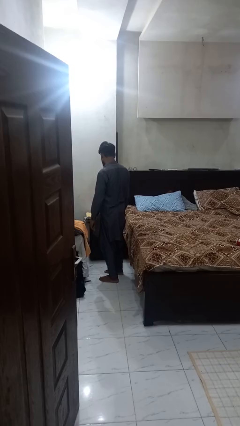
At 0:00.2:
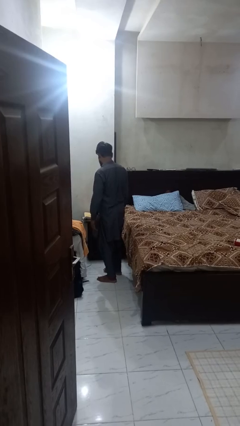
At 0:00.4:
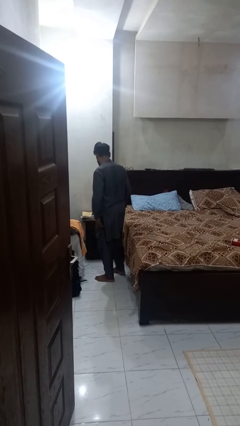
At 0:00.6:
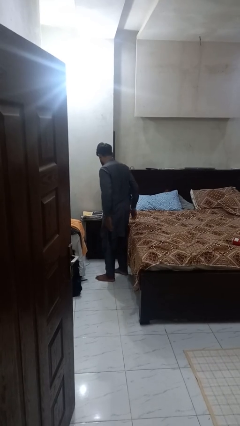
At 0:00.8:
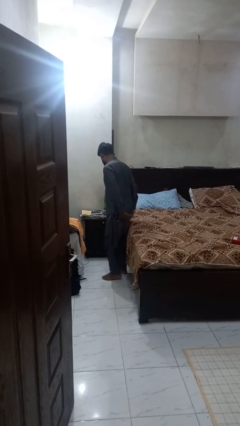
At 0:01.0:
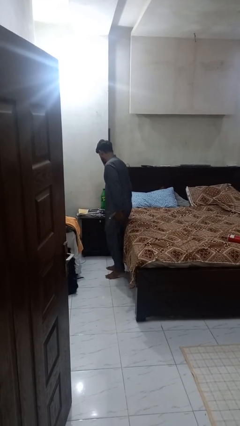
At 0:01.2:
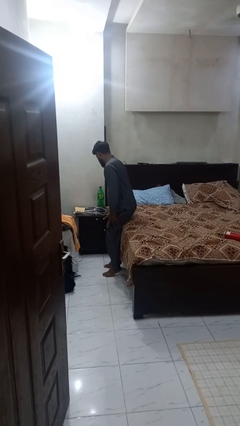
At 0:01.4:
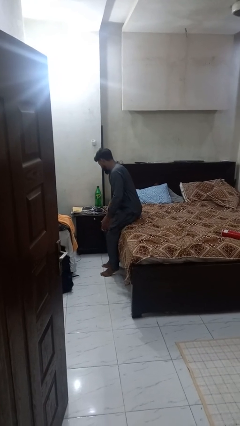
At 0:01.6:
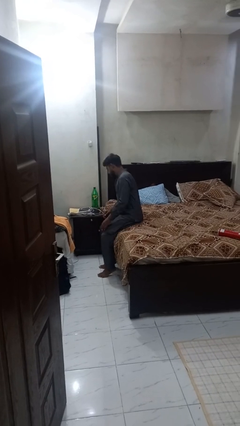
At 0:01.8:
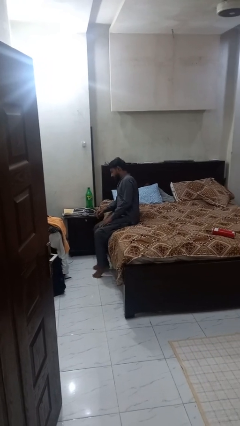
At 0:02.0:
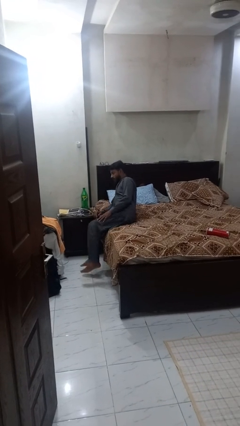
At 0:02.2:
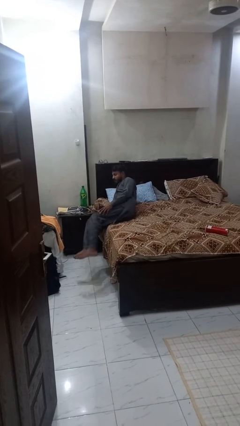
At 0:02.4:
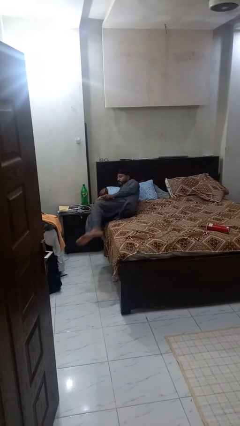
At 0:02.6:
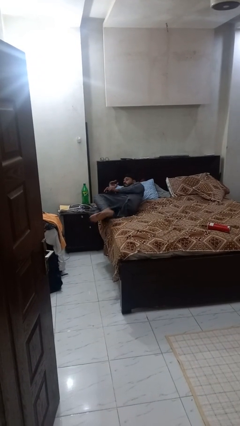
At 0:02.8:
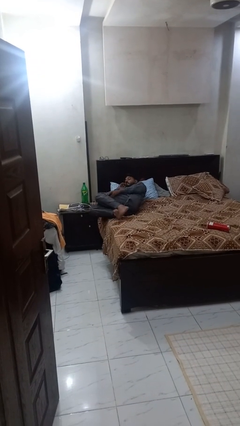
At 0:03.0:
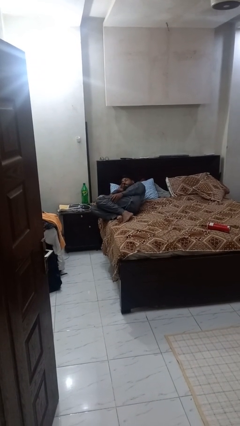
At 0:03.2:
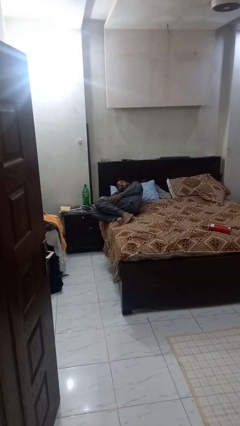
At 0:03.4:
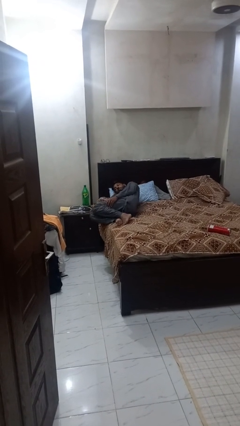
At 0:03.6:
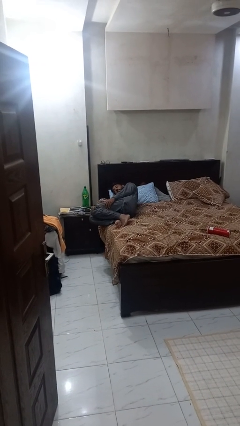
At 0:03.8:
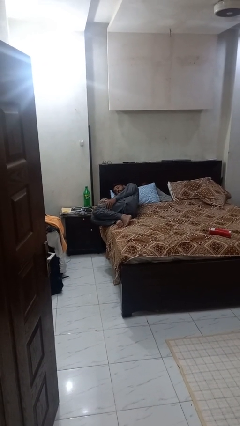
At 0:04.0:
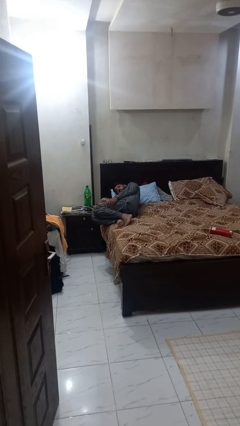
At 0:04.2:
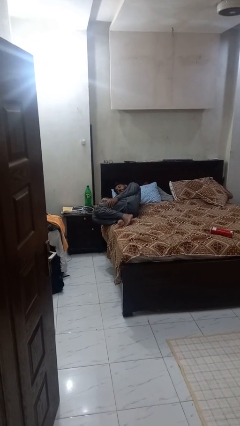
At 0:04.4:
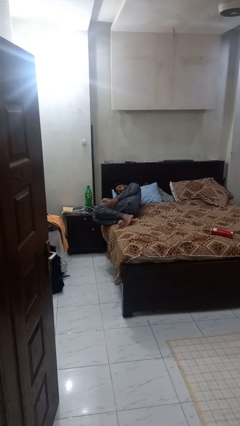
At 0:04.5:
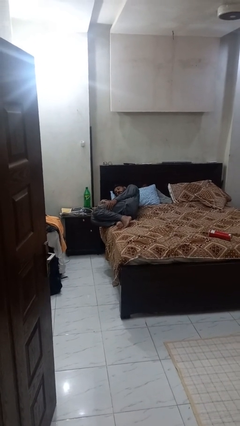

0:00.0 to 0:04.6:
person lies down on bed

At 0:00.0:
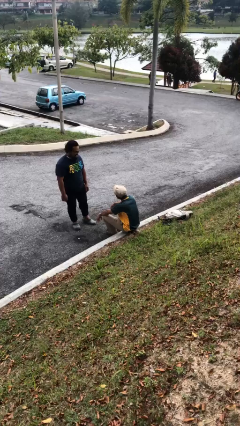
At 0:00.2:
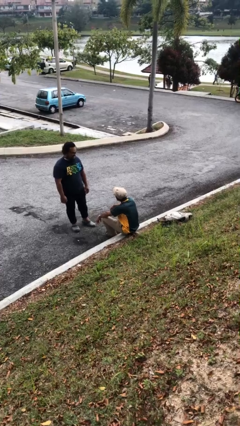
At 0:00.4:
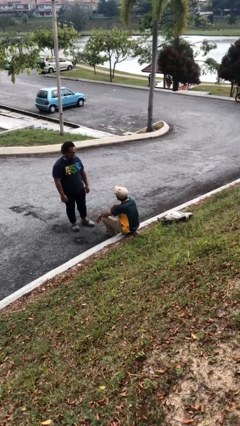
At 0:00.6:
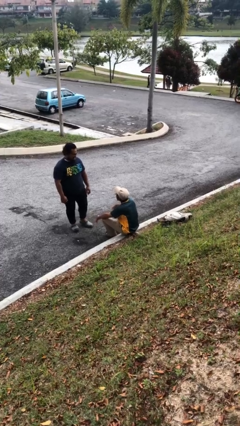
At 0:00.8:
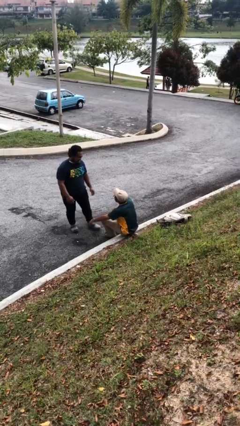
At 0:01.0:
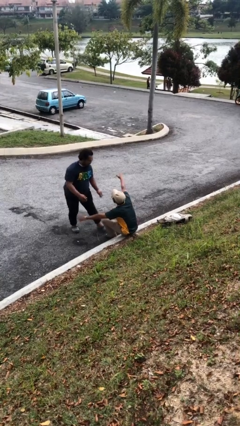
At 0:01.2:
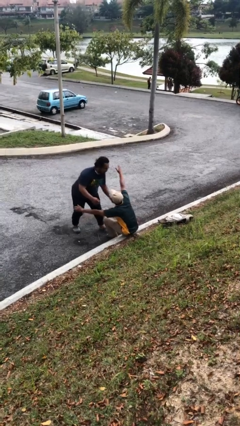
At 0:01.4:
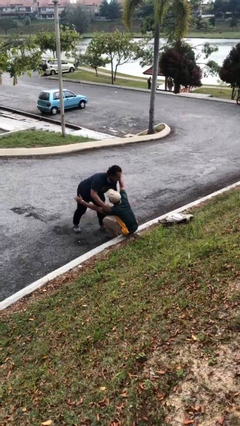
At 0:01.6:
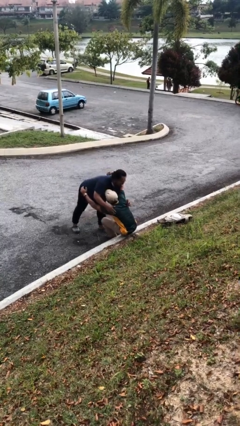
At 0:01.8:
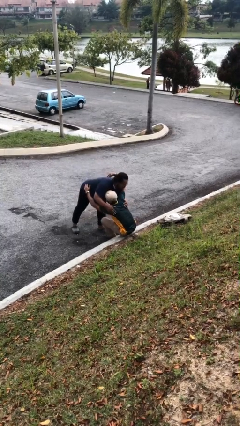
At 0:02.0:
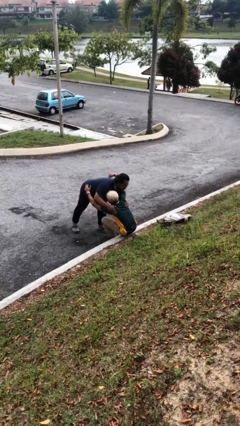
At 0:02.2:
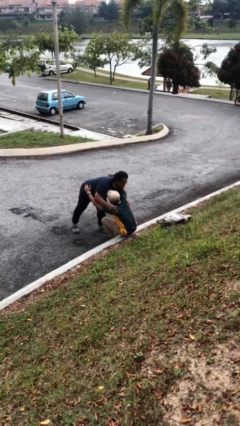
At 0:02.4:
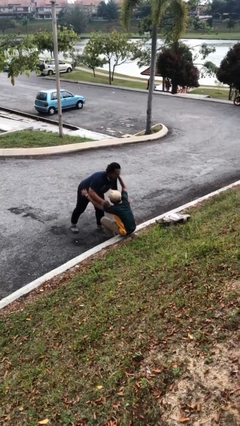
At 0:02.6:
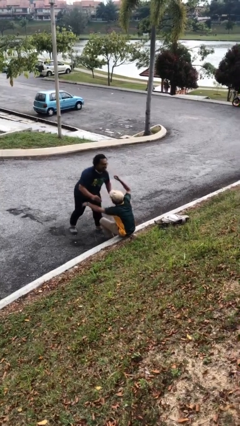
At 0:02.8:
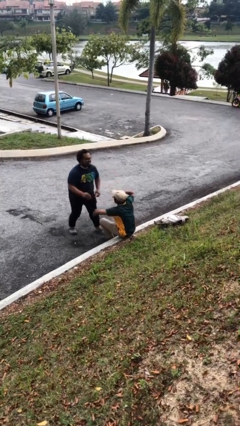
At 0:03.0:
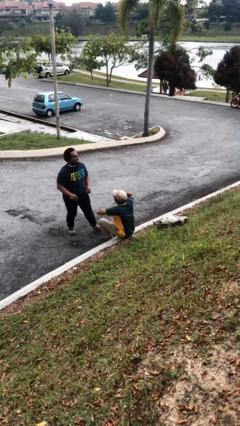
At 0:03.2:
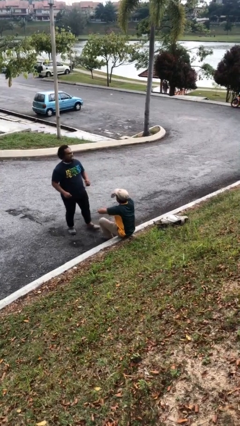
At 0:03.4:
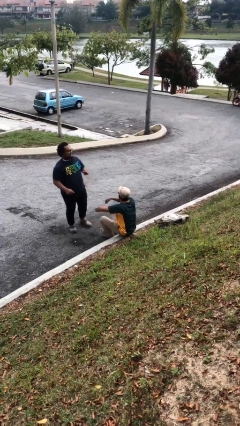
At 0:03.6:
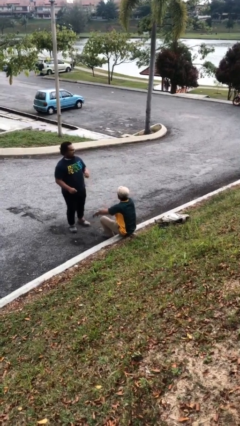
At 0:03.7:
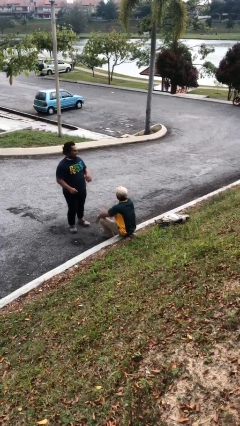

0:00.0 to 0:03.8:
person embraces person

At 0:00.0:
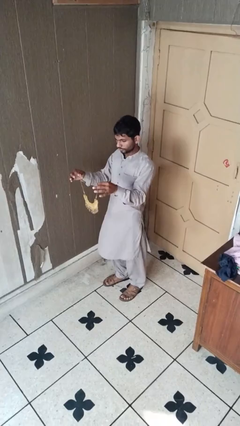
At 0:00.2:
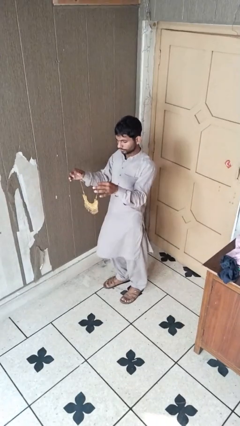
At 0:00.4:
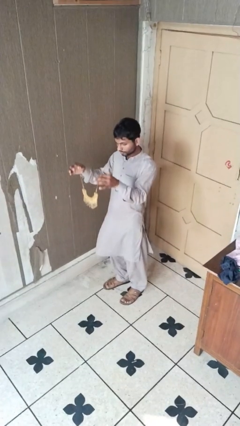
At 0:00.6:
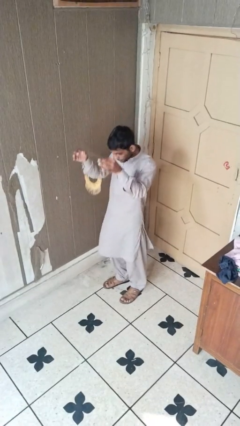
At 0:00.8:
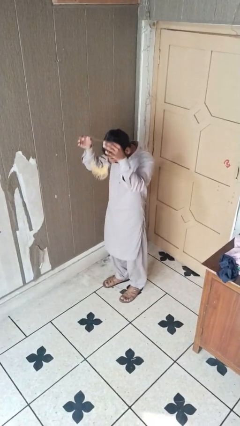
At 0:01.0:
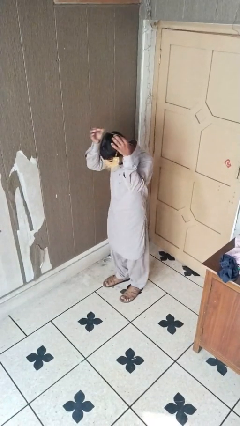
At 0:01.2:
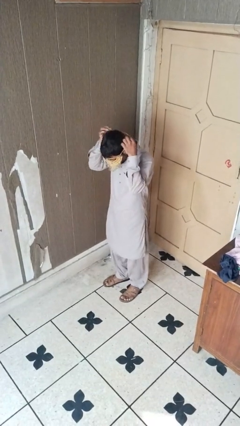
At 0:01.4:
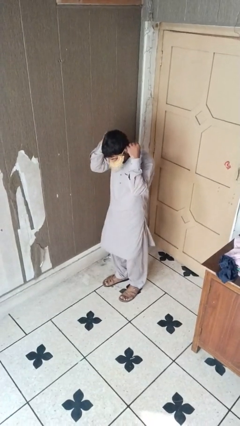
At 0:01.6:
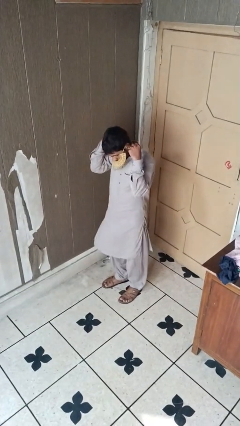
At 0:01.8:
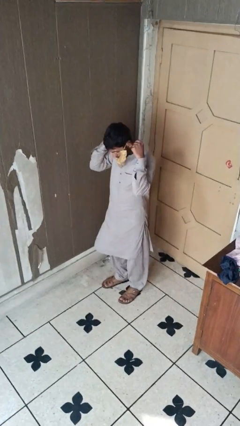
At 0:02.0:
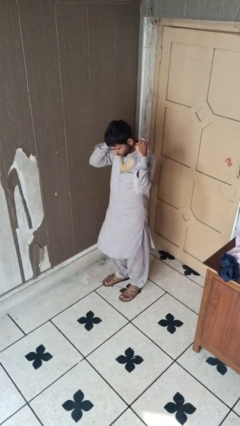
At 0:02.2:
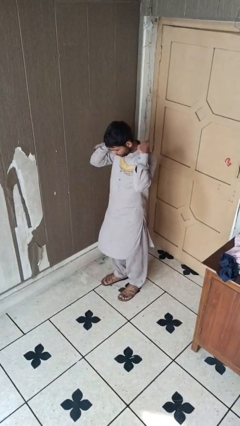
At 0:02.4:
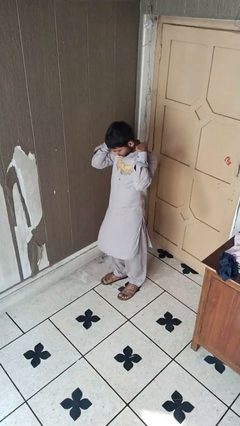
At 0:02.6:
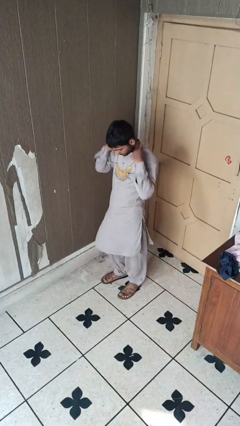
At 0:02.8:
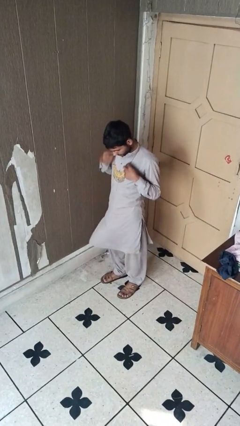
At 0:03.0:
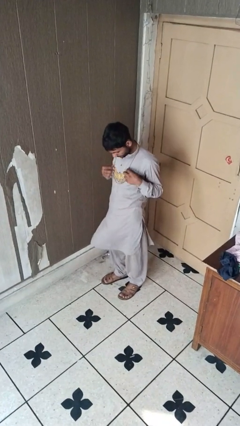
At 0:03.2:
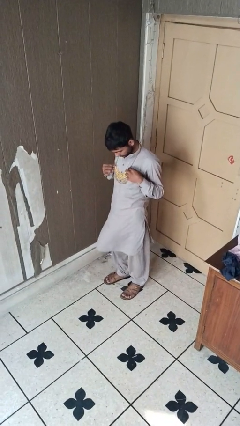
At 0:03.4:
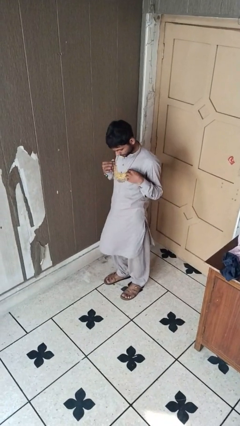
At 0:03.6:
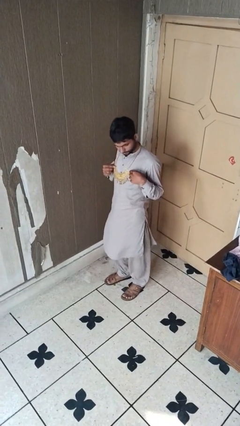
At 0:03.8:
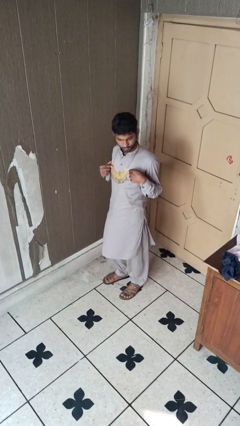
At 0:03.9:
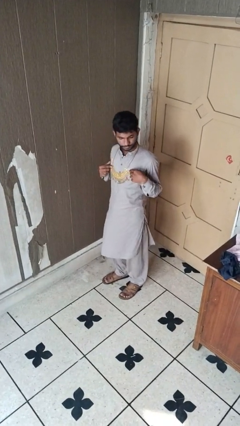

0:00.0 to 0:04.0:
person puts on necklace

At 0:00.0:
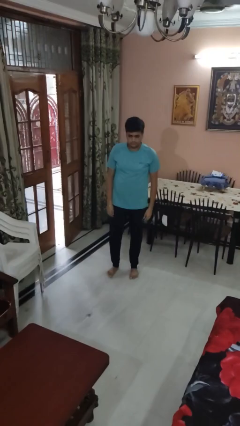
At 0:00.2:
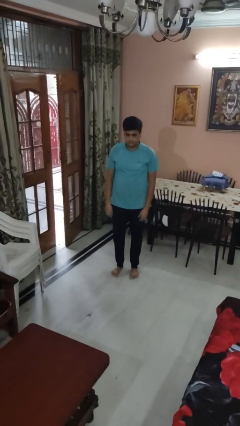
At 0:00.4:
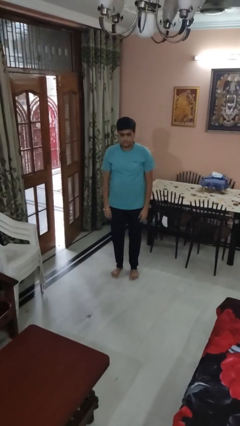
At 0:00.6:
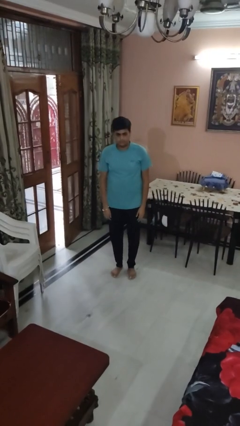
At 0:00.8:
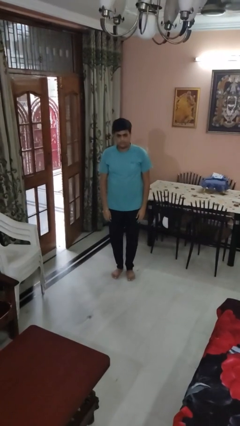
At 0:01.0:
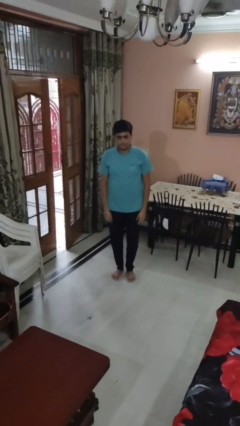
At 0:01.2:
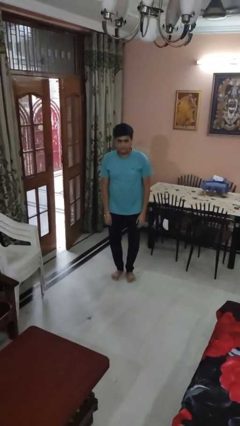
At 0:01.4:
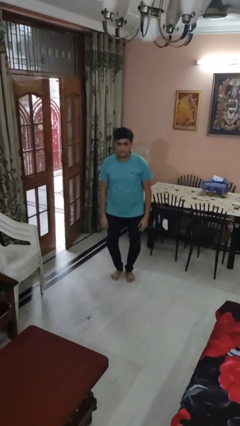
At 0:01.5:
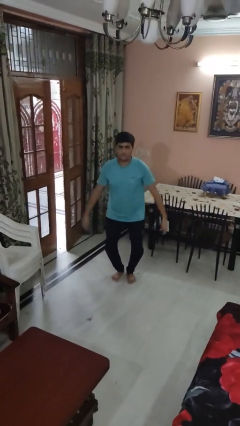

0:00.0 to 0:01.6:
person exercises with jumping jacks

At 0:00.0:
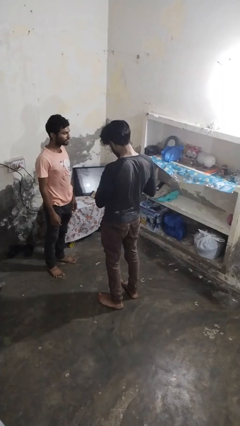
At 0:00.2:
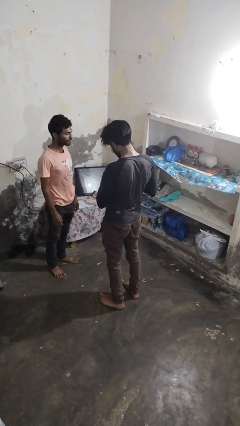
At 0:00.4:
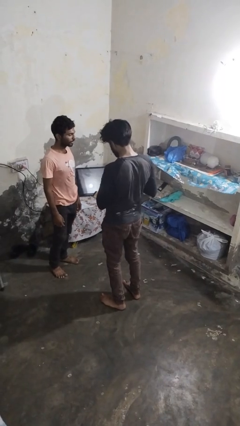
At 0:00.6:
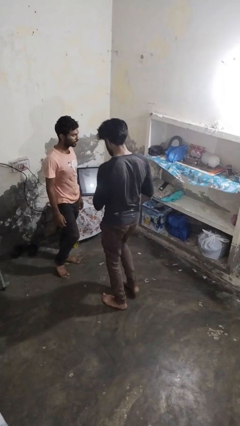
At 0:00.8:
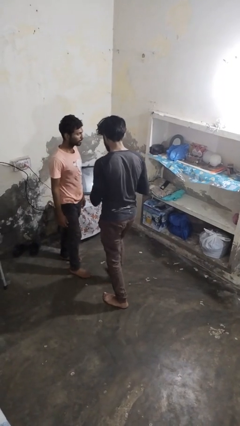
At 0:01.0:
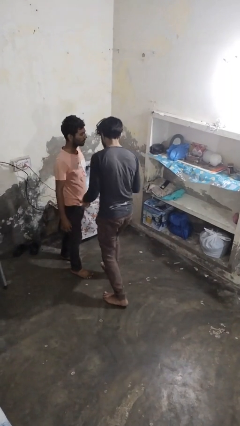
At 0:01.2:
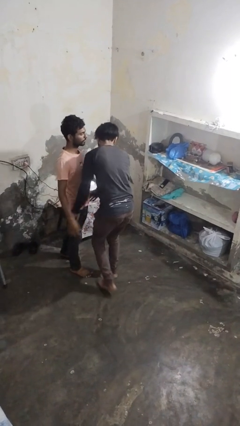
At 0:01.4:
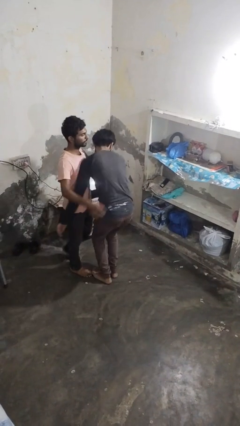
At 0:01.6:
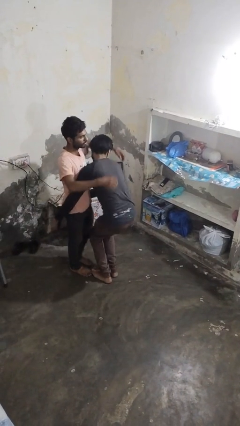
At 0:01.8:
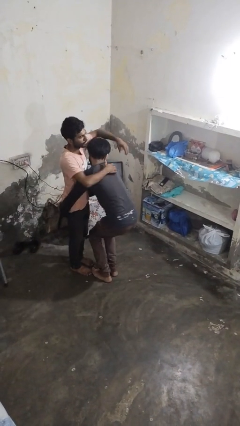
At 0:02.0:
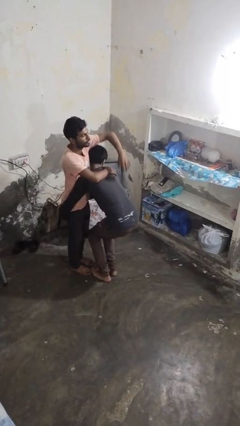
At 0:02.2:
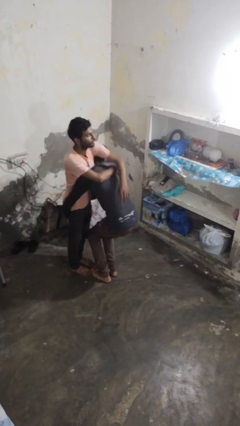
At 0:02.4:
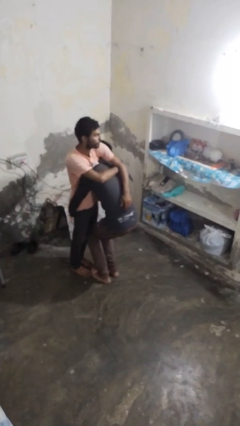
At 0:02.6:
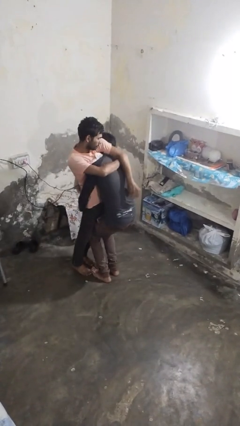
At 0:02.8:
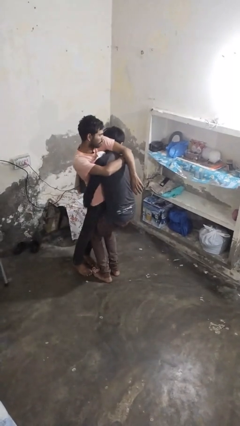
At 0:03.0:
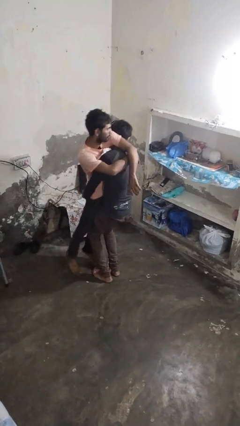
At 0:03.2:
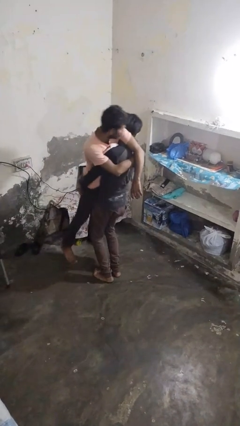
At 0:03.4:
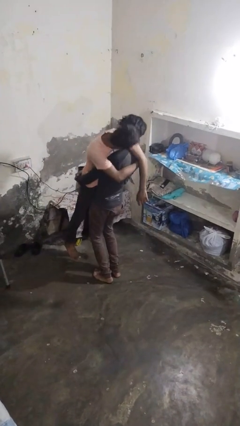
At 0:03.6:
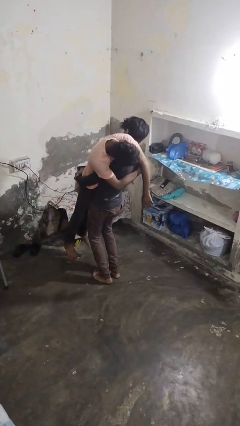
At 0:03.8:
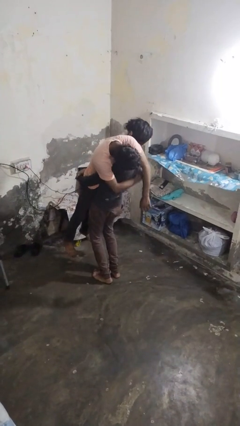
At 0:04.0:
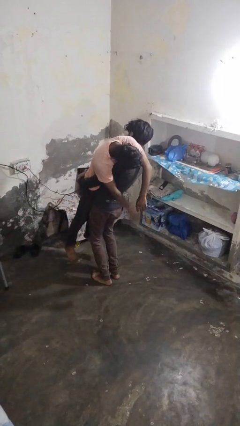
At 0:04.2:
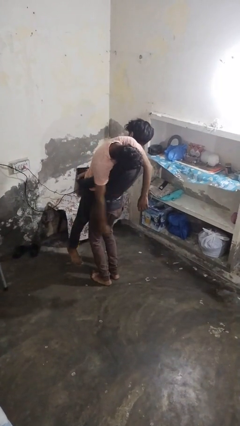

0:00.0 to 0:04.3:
person picks up person
